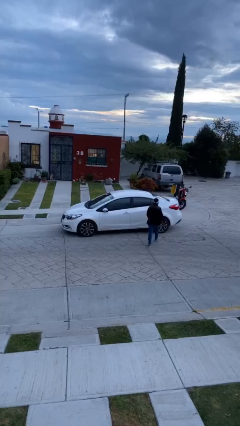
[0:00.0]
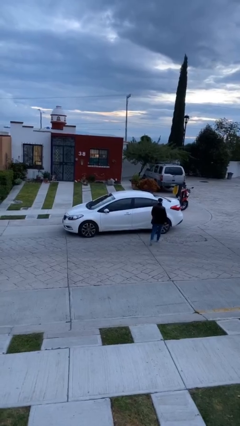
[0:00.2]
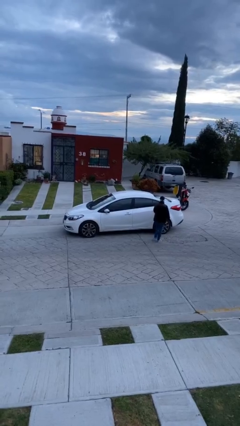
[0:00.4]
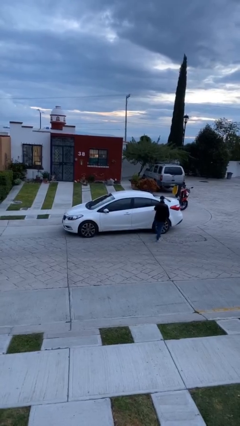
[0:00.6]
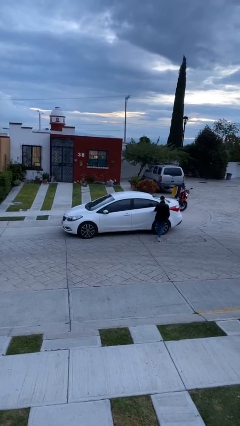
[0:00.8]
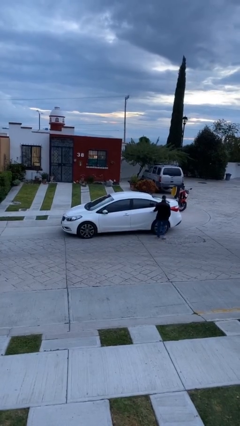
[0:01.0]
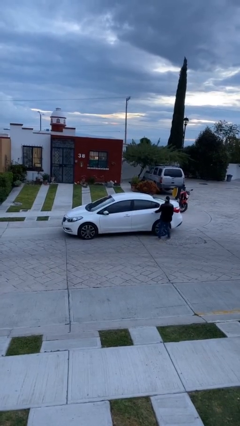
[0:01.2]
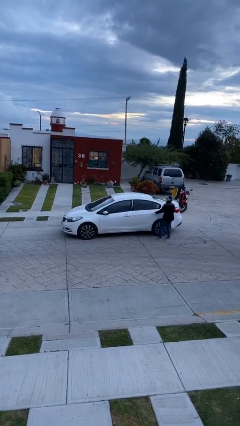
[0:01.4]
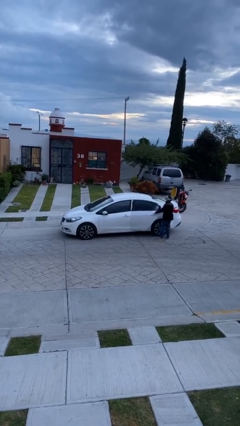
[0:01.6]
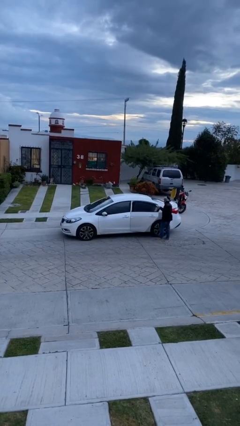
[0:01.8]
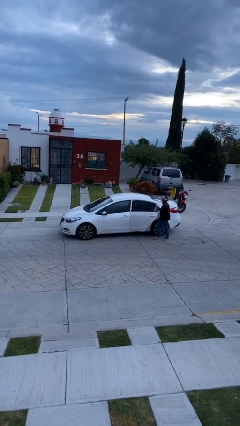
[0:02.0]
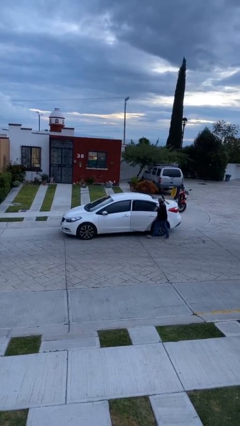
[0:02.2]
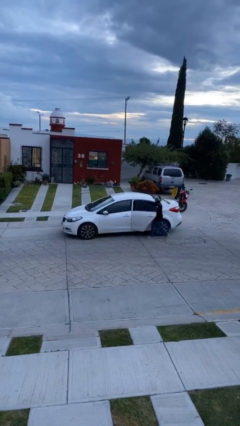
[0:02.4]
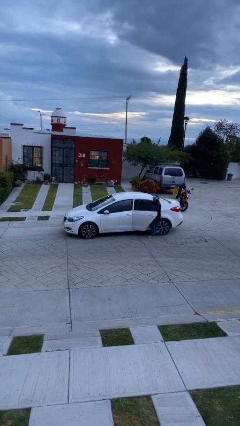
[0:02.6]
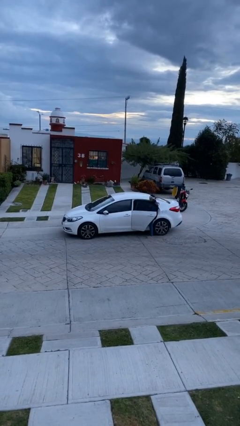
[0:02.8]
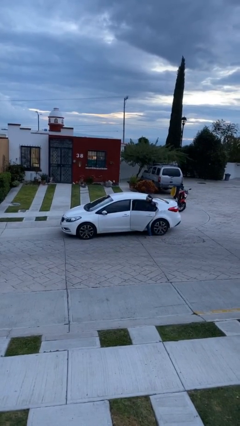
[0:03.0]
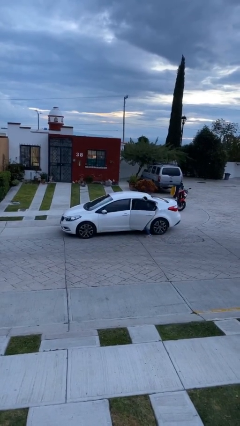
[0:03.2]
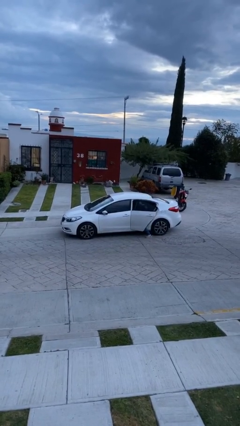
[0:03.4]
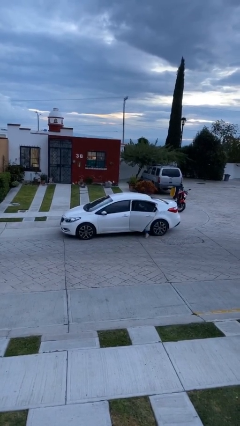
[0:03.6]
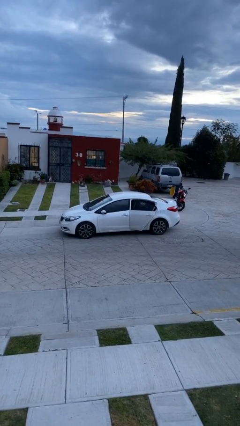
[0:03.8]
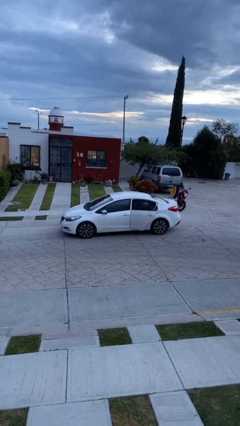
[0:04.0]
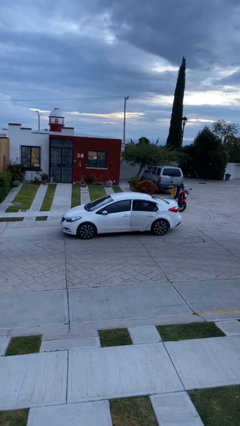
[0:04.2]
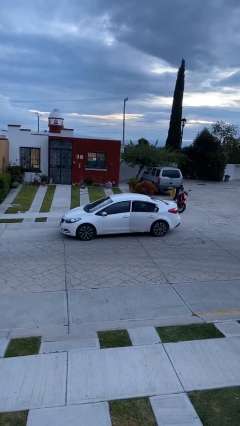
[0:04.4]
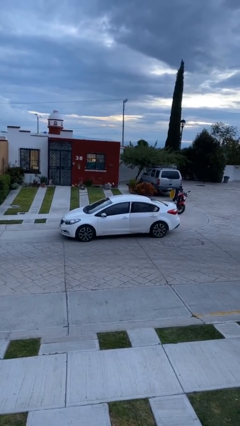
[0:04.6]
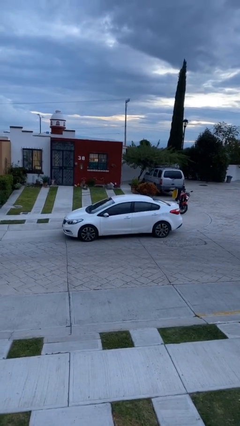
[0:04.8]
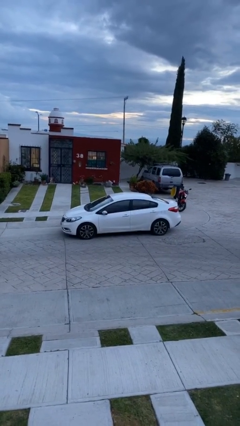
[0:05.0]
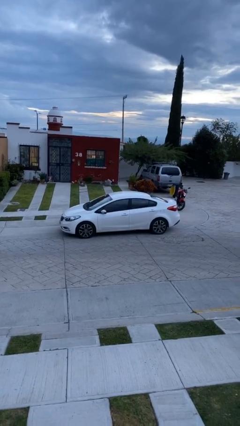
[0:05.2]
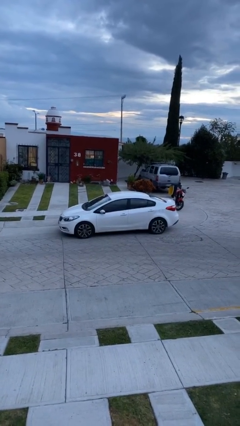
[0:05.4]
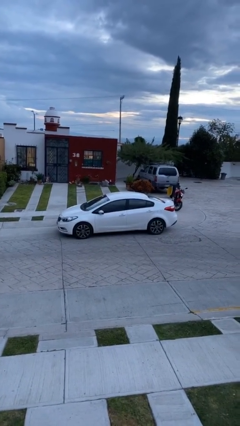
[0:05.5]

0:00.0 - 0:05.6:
car picks up person

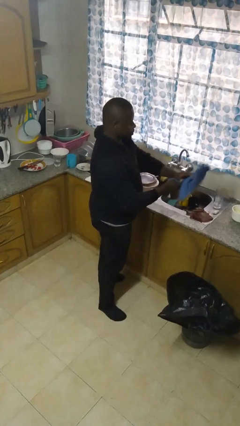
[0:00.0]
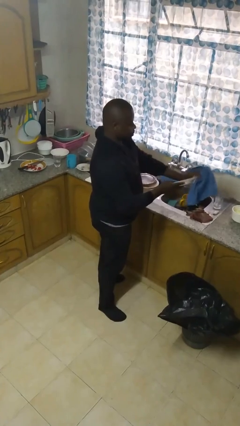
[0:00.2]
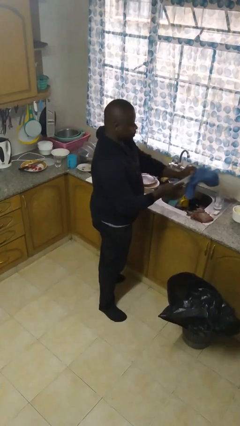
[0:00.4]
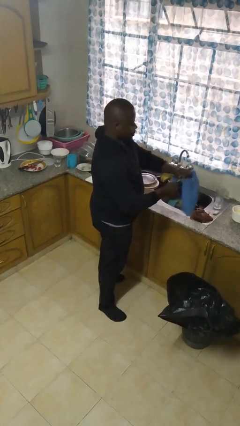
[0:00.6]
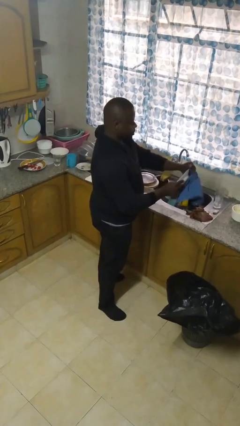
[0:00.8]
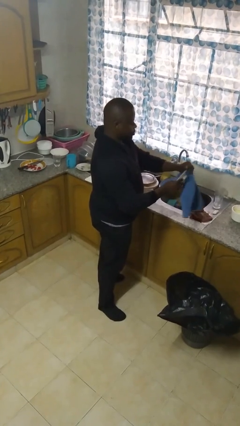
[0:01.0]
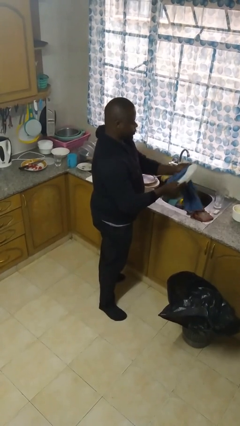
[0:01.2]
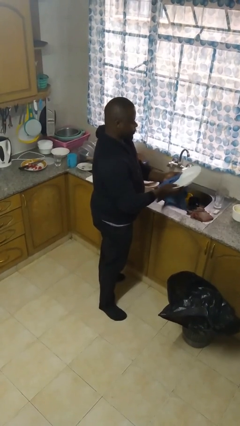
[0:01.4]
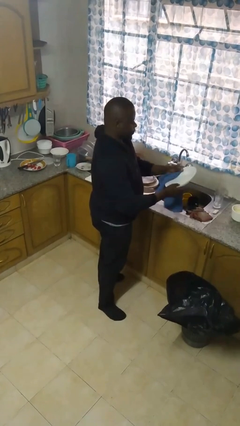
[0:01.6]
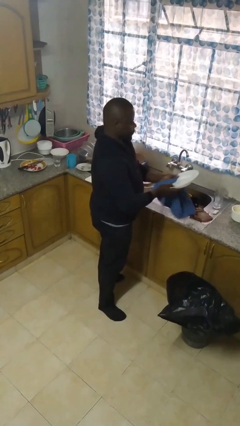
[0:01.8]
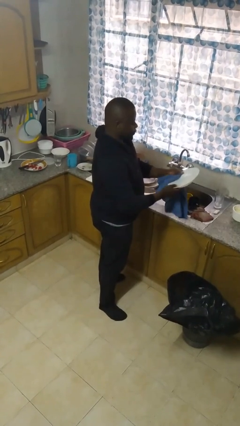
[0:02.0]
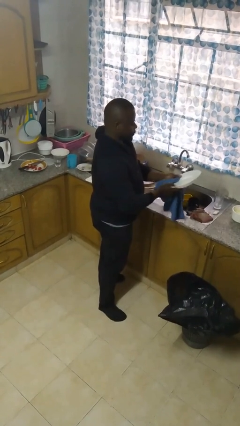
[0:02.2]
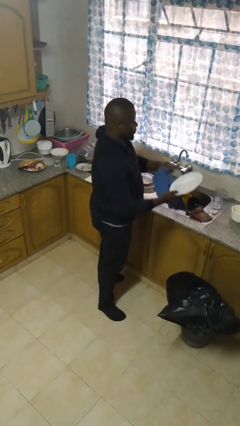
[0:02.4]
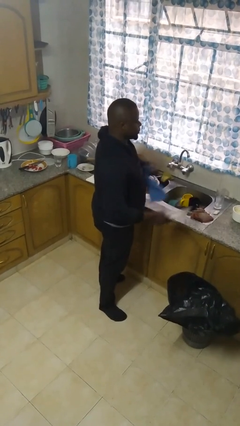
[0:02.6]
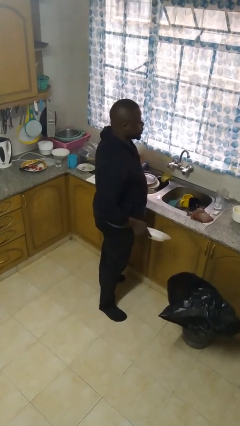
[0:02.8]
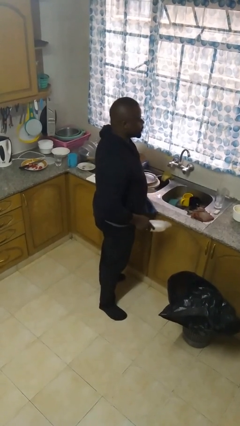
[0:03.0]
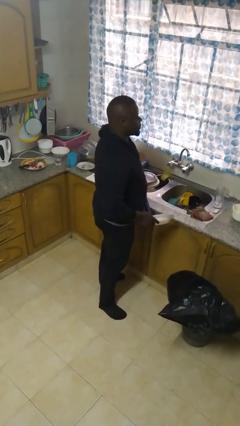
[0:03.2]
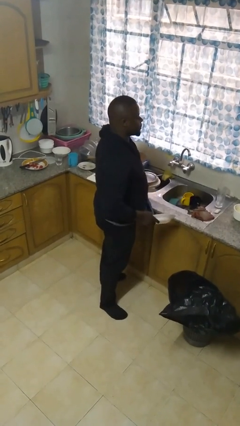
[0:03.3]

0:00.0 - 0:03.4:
person dries dish

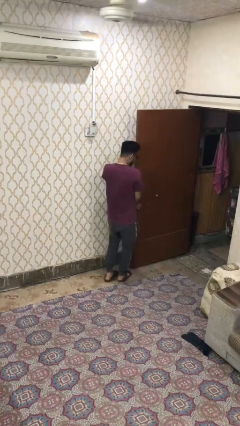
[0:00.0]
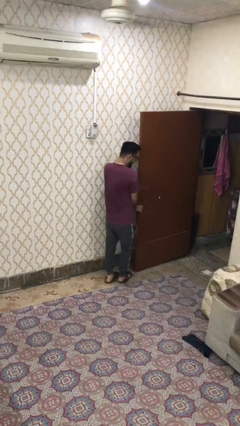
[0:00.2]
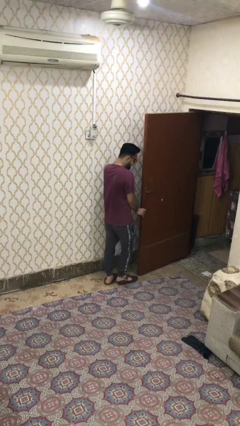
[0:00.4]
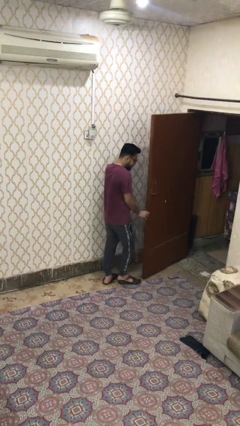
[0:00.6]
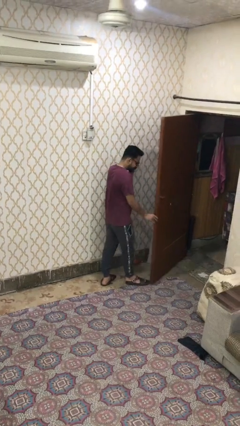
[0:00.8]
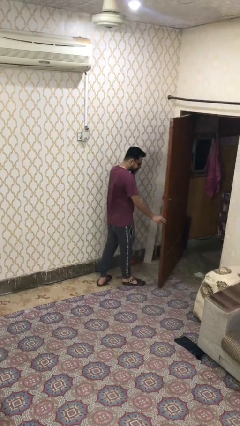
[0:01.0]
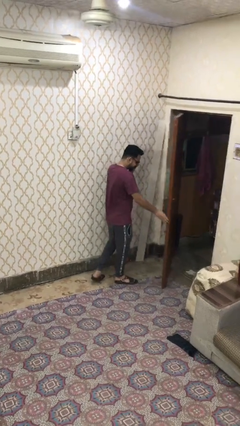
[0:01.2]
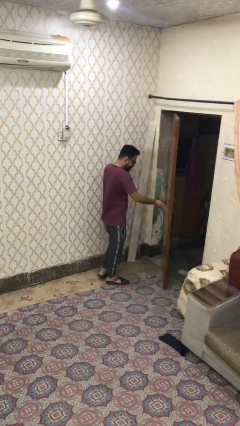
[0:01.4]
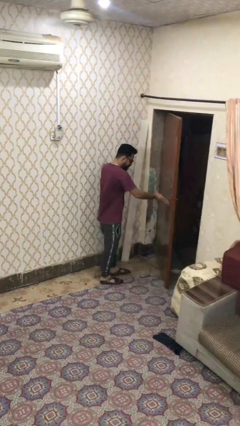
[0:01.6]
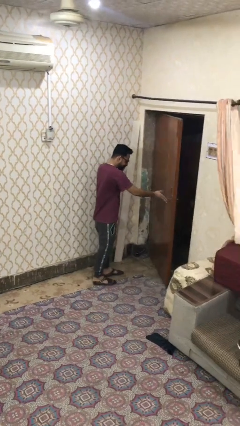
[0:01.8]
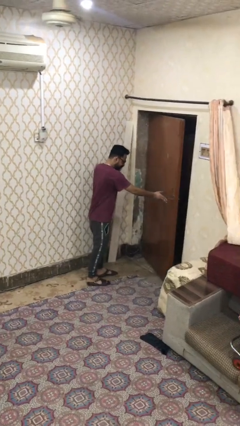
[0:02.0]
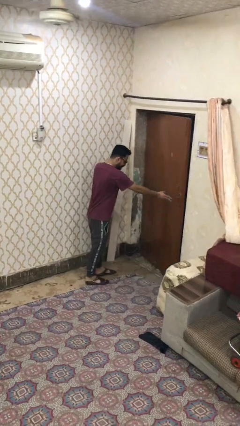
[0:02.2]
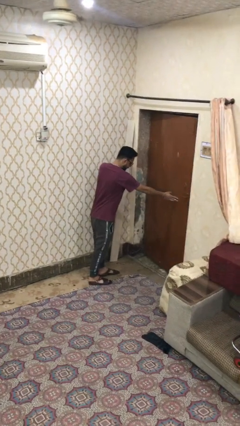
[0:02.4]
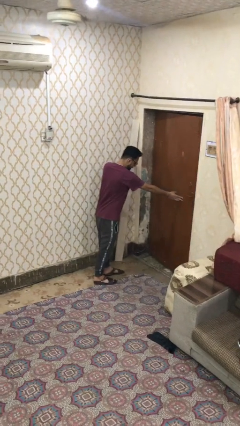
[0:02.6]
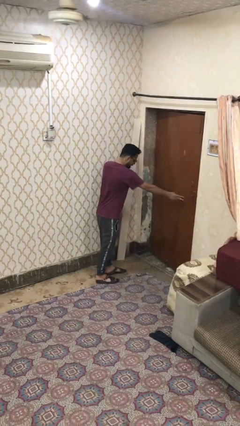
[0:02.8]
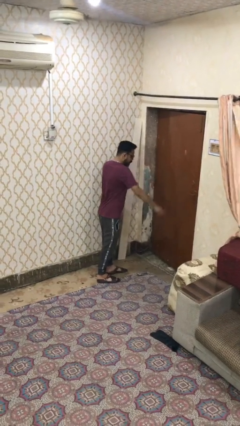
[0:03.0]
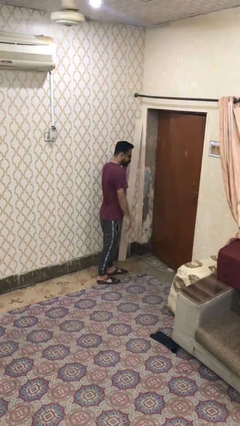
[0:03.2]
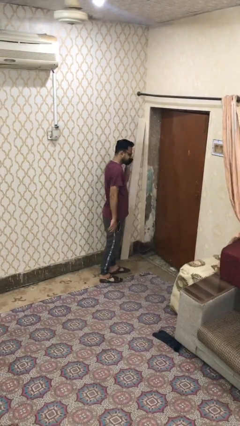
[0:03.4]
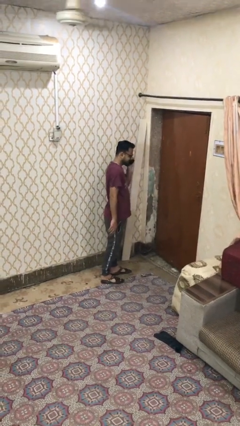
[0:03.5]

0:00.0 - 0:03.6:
person closes facility door

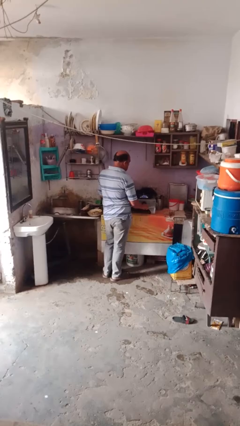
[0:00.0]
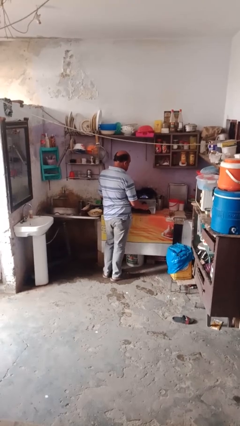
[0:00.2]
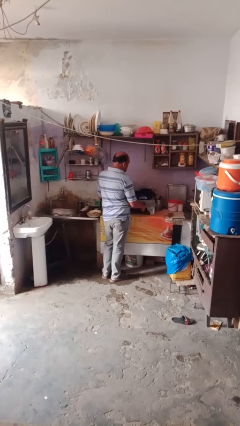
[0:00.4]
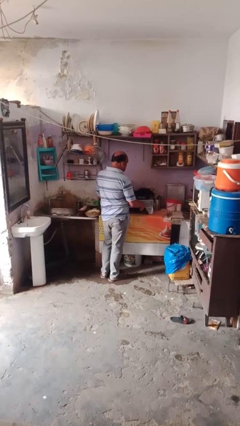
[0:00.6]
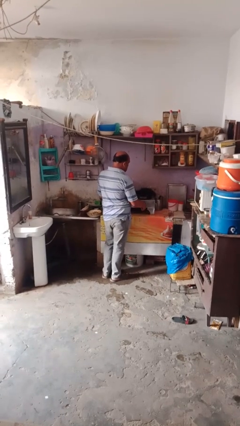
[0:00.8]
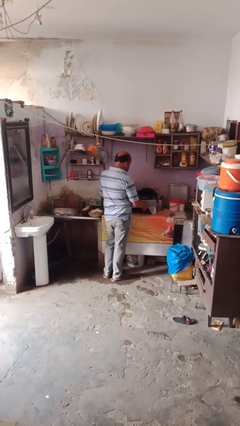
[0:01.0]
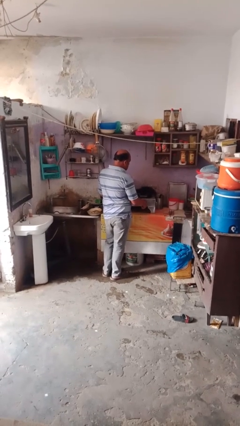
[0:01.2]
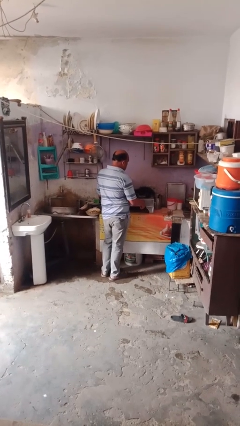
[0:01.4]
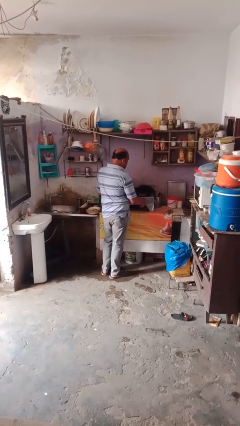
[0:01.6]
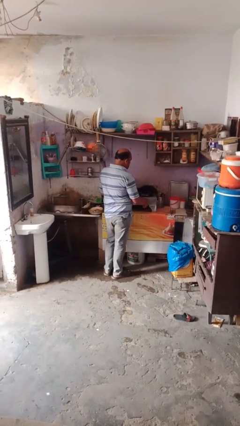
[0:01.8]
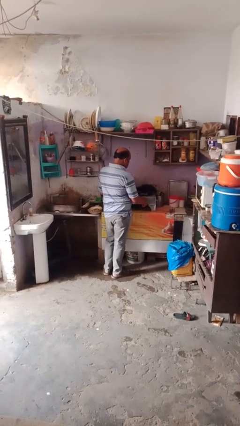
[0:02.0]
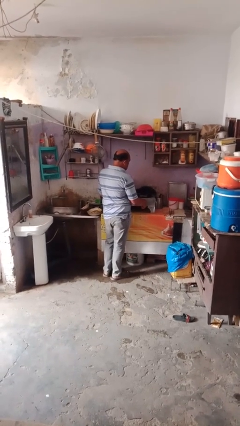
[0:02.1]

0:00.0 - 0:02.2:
person turns off stovetop

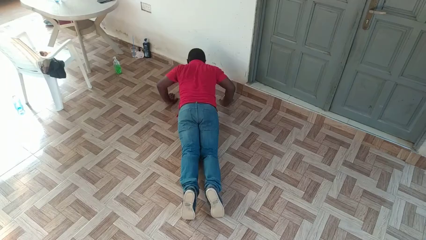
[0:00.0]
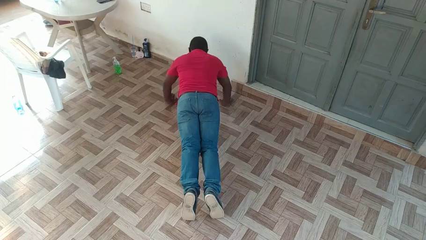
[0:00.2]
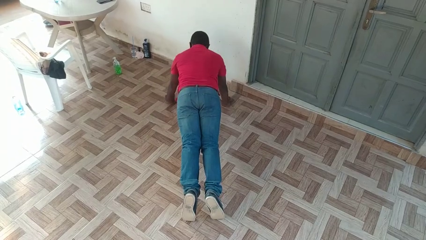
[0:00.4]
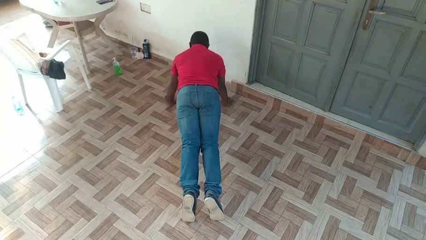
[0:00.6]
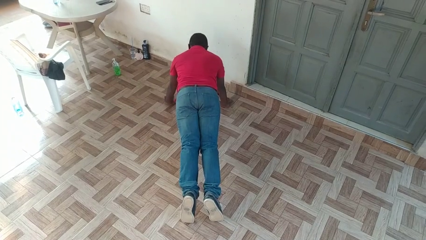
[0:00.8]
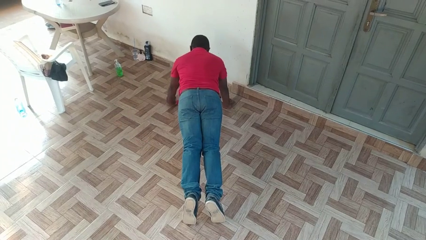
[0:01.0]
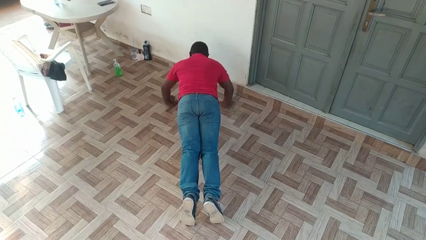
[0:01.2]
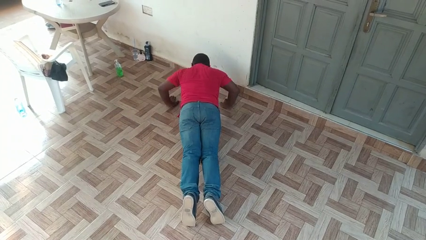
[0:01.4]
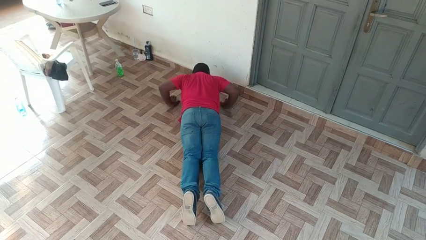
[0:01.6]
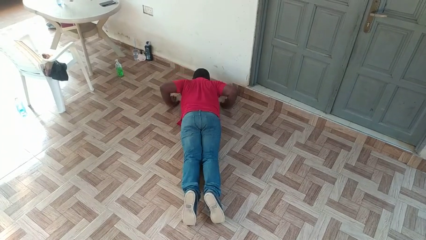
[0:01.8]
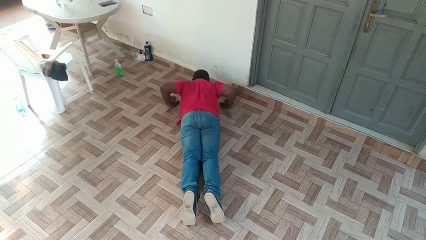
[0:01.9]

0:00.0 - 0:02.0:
person exercises with pushup

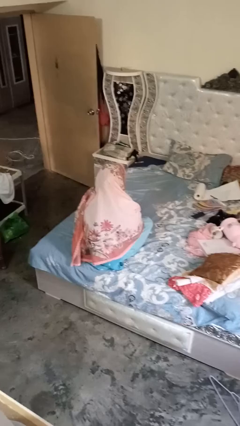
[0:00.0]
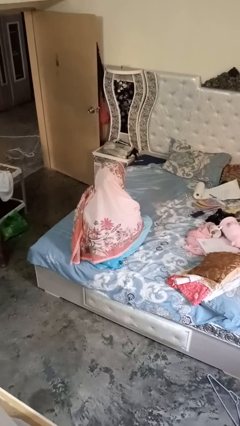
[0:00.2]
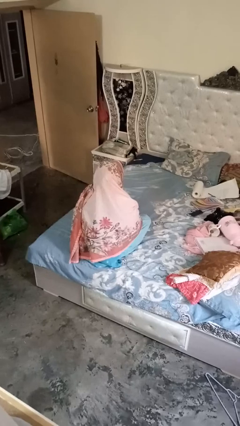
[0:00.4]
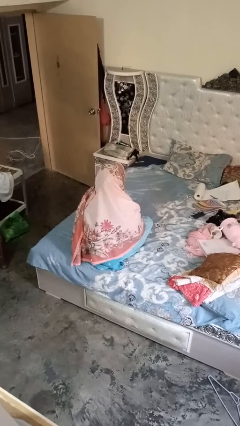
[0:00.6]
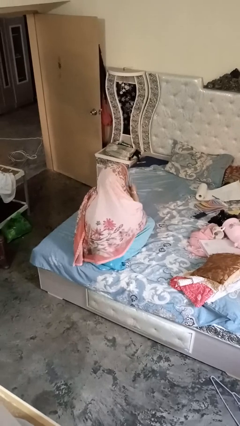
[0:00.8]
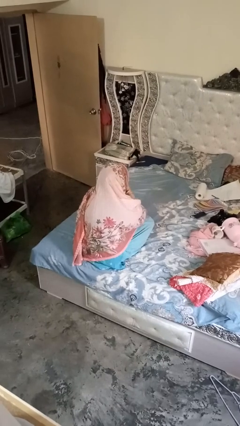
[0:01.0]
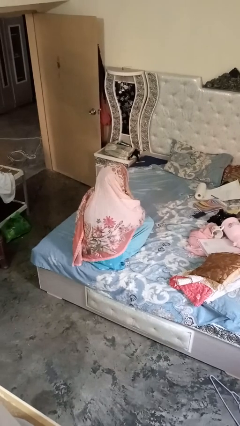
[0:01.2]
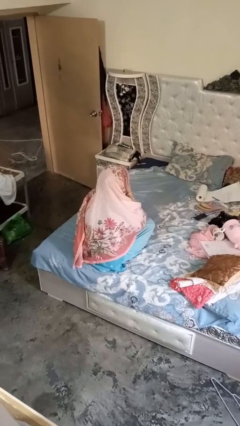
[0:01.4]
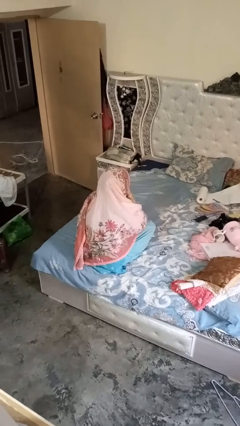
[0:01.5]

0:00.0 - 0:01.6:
person blows nose
